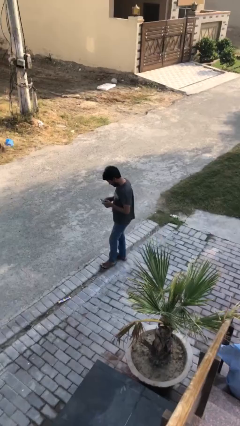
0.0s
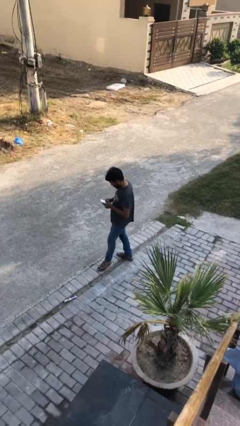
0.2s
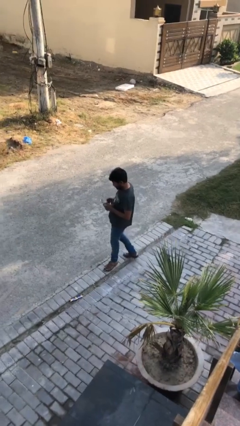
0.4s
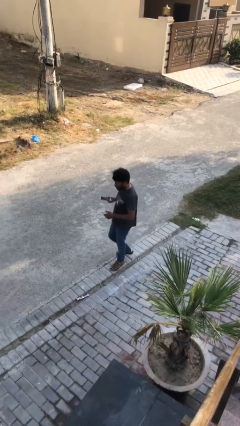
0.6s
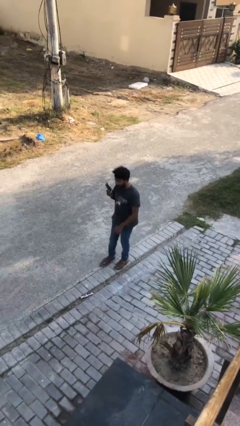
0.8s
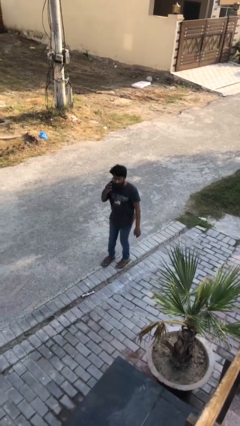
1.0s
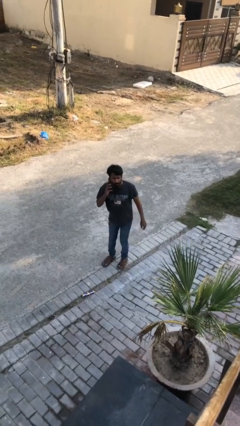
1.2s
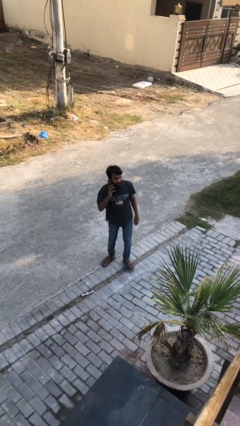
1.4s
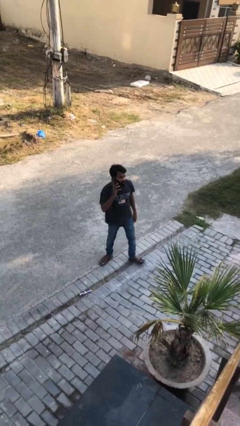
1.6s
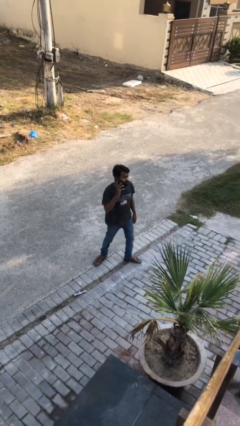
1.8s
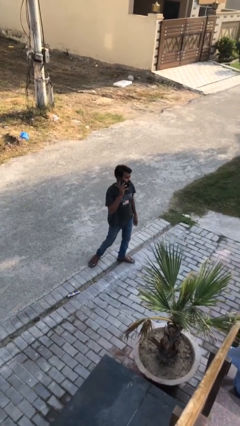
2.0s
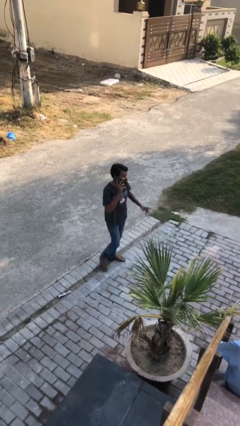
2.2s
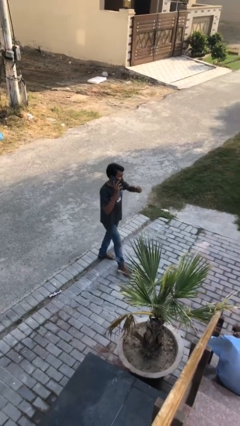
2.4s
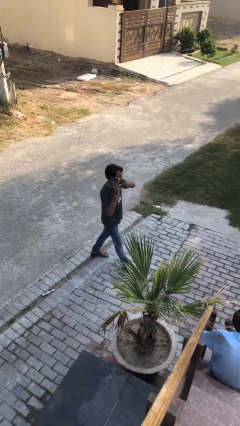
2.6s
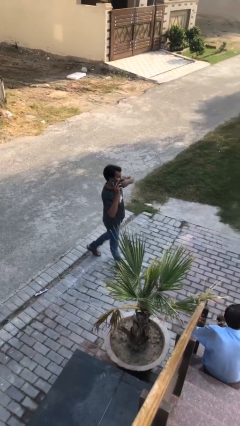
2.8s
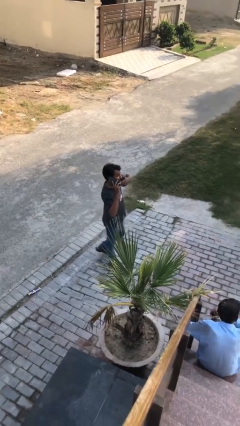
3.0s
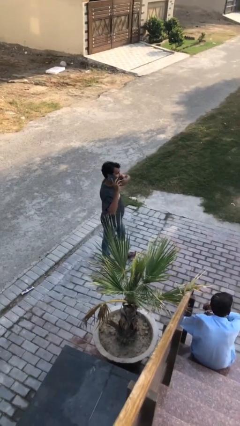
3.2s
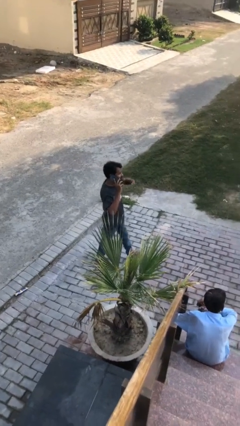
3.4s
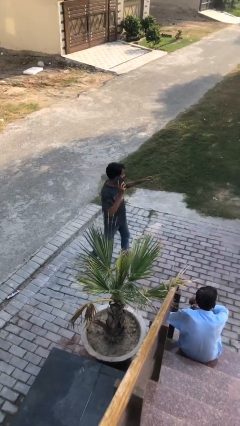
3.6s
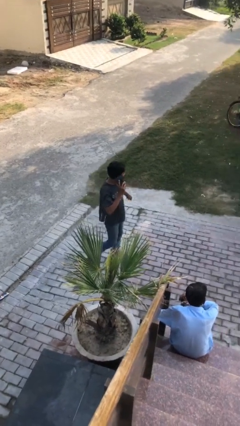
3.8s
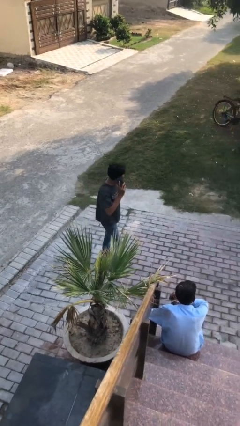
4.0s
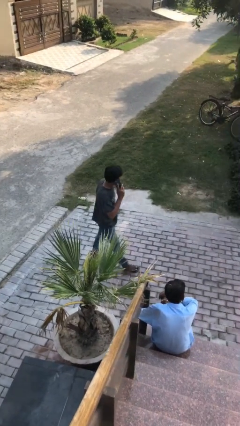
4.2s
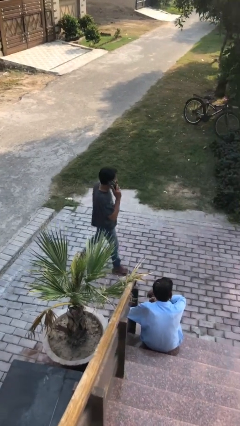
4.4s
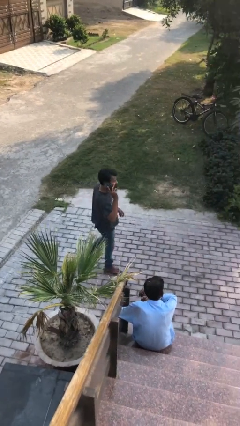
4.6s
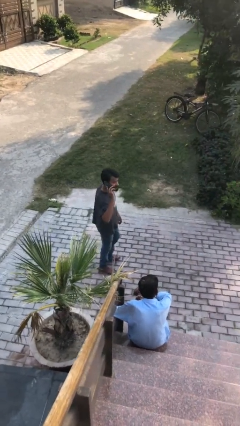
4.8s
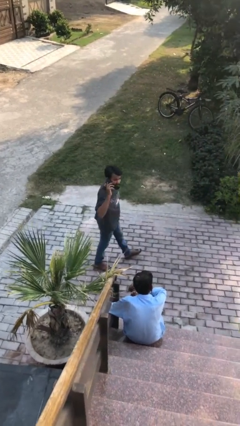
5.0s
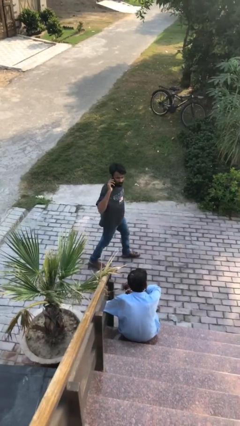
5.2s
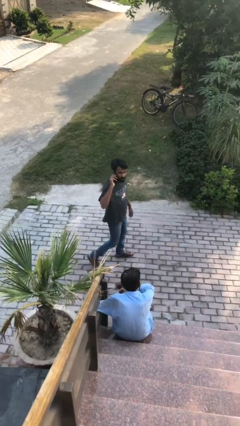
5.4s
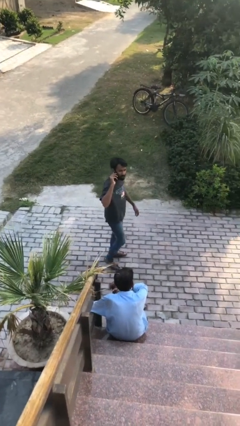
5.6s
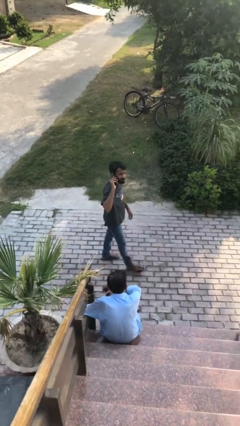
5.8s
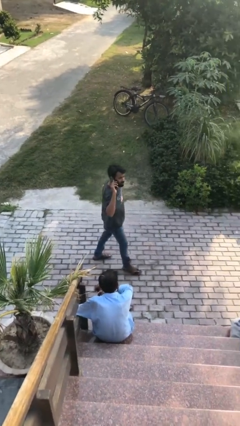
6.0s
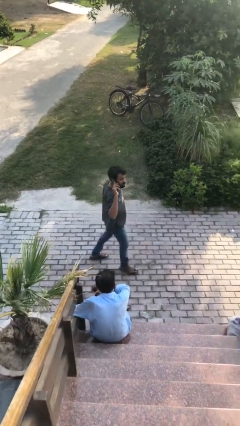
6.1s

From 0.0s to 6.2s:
person talks on phone

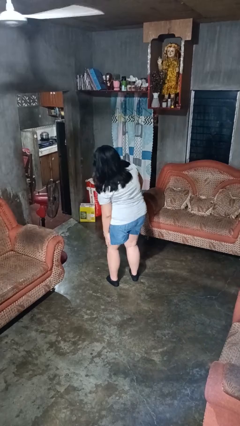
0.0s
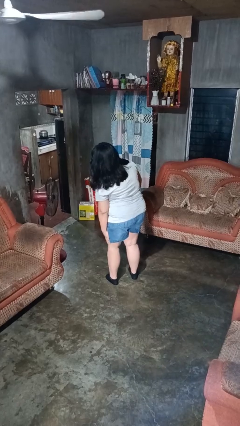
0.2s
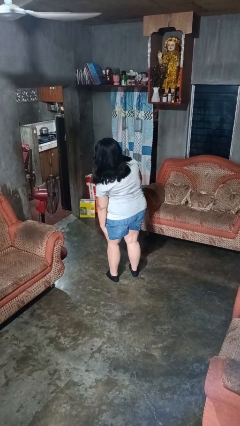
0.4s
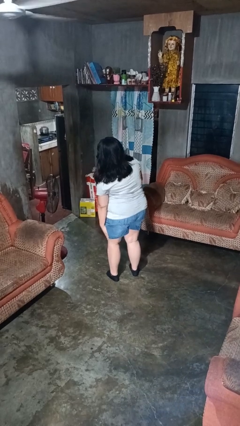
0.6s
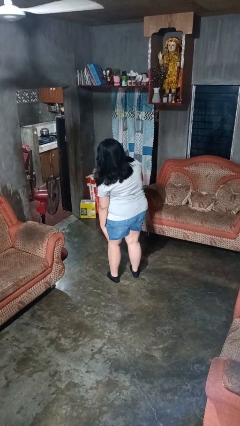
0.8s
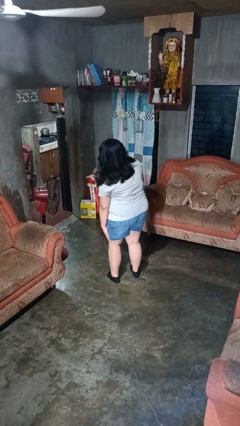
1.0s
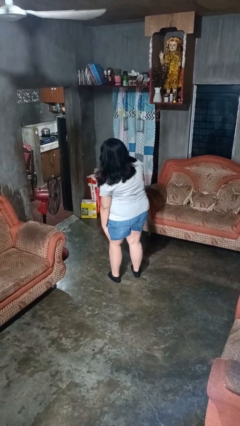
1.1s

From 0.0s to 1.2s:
person swats bug

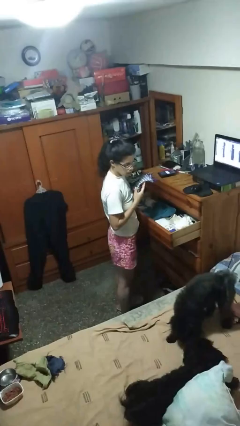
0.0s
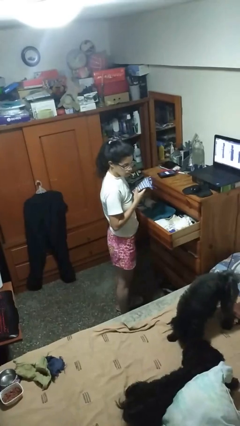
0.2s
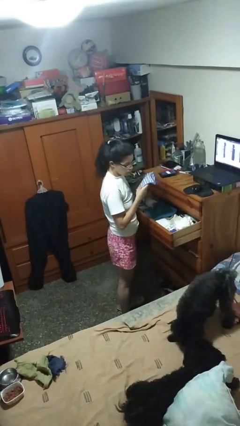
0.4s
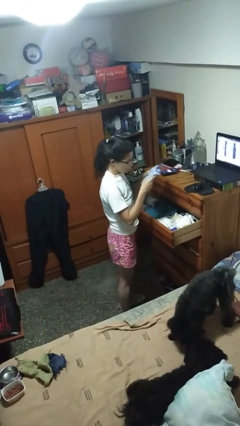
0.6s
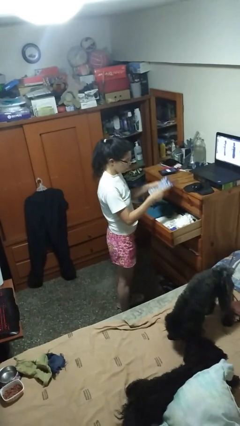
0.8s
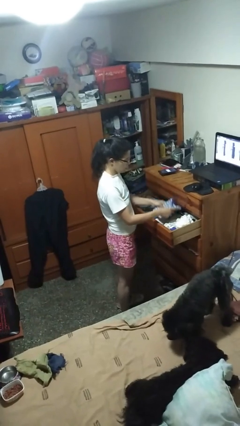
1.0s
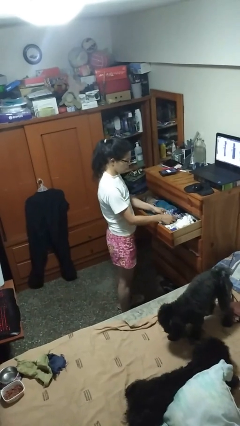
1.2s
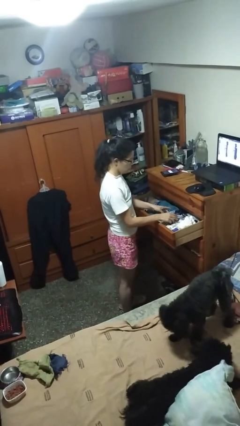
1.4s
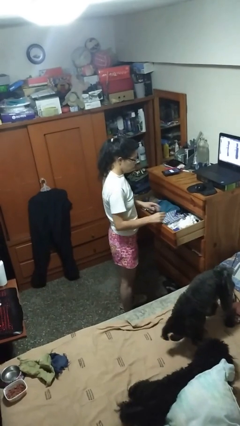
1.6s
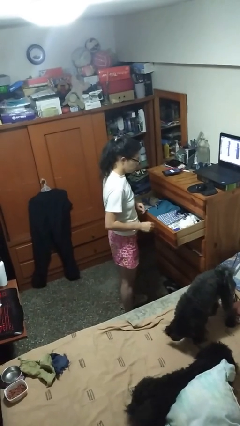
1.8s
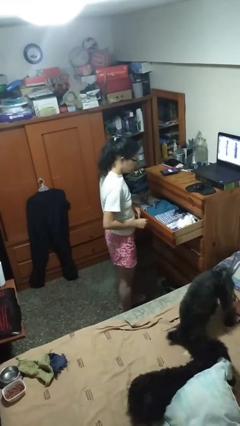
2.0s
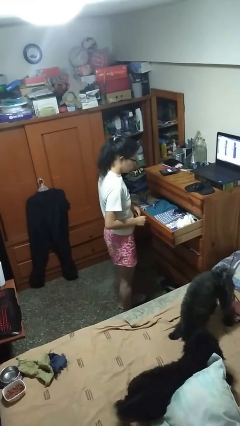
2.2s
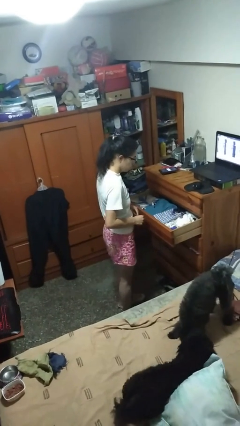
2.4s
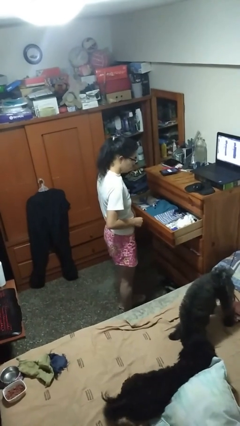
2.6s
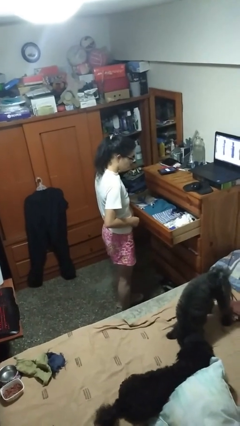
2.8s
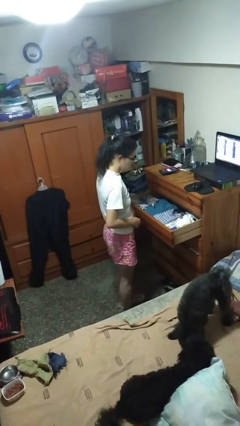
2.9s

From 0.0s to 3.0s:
person puts clothes into dresser

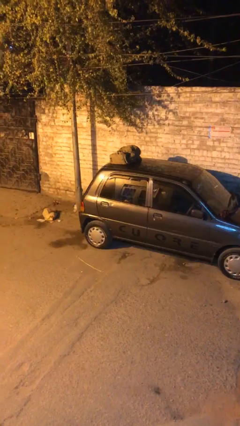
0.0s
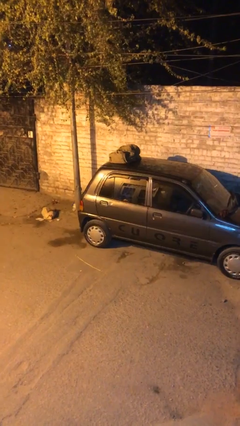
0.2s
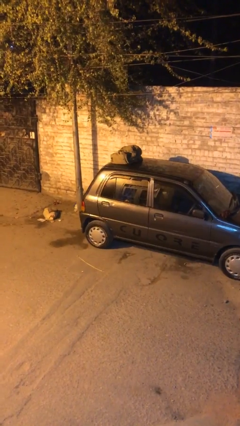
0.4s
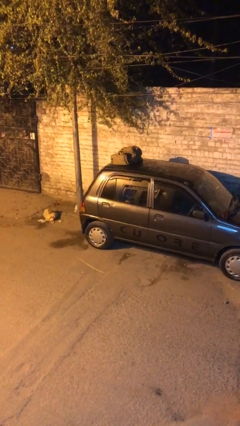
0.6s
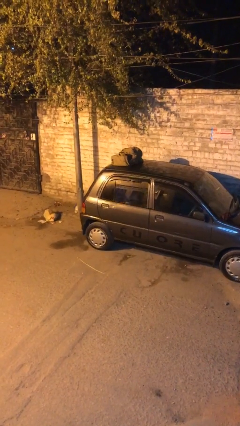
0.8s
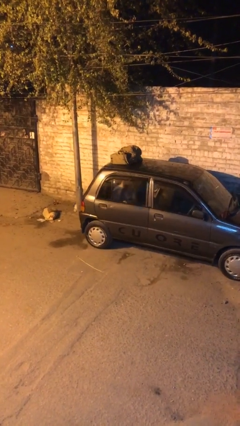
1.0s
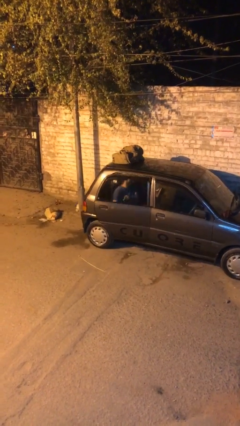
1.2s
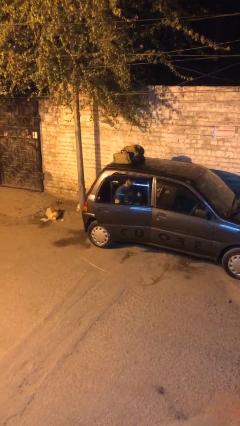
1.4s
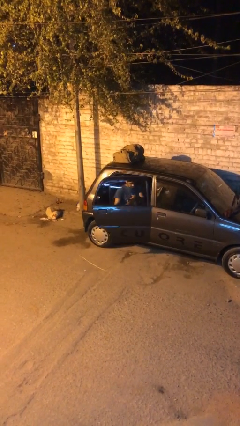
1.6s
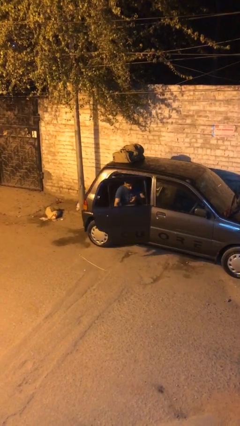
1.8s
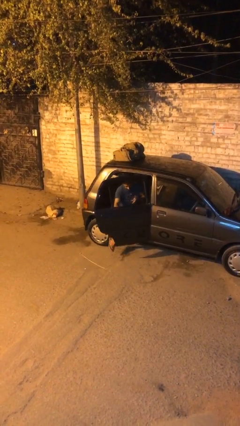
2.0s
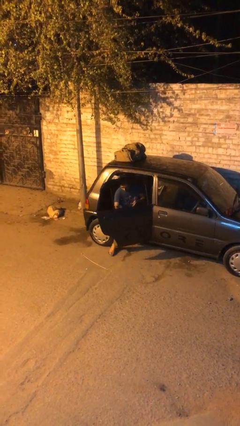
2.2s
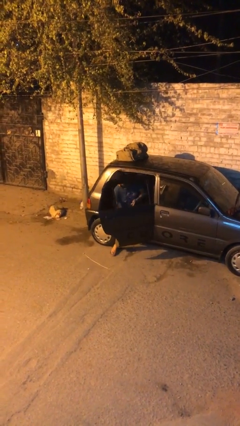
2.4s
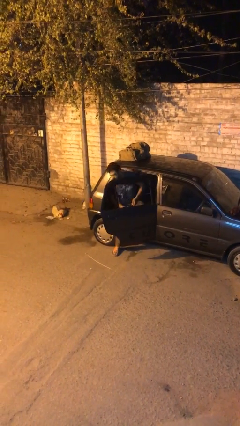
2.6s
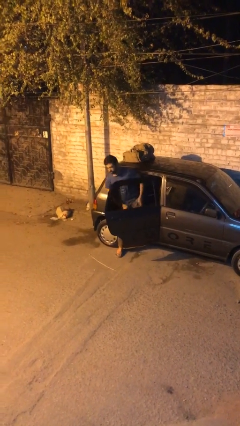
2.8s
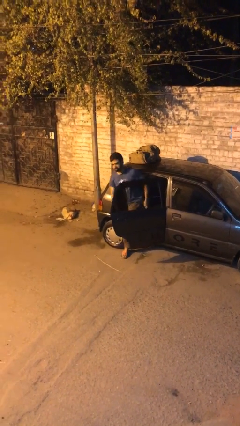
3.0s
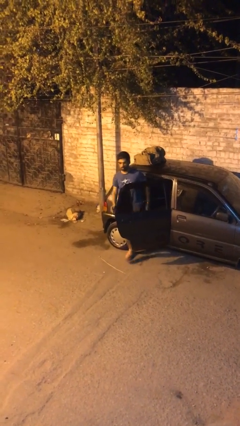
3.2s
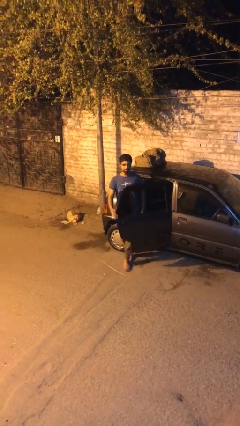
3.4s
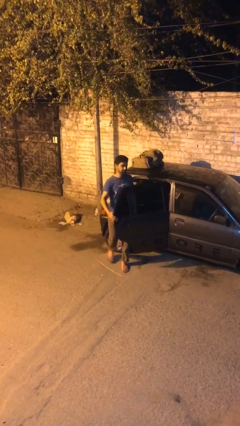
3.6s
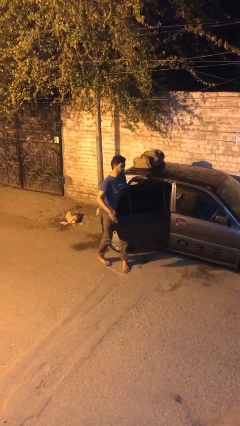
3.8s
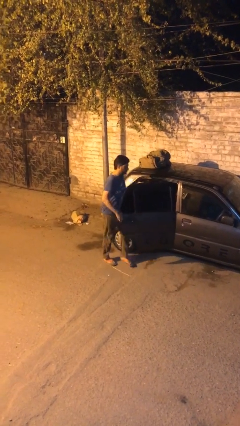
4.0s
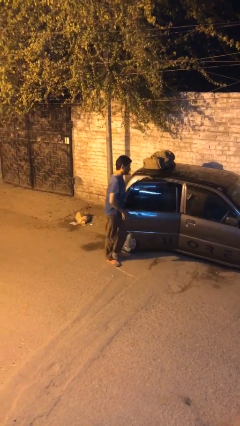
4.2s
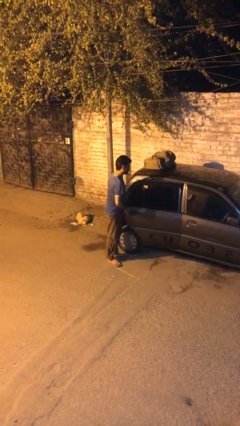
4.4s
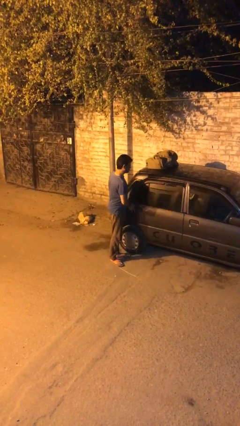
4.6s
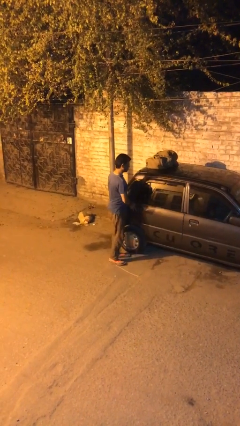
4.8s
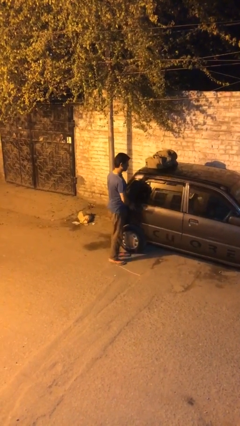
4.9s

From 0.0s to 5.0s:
car drops off person

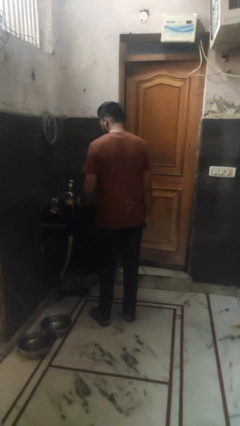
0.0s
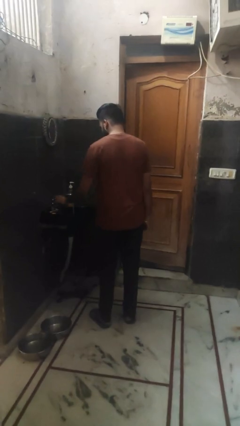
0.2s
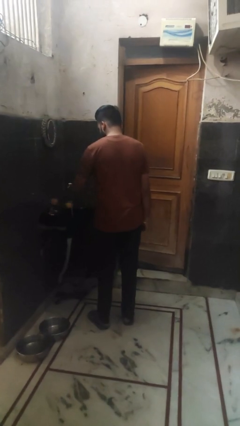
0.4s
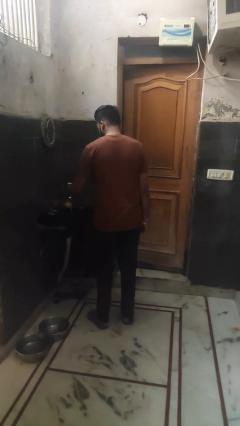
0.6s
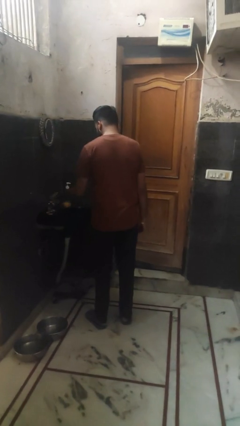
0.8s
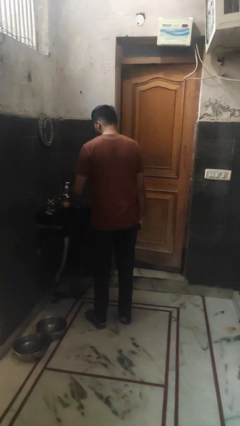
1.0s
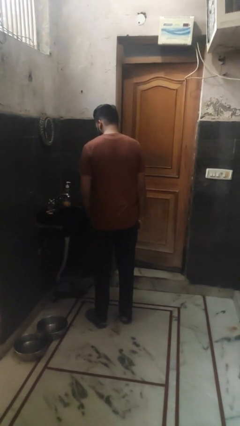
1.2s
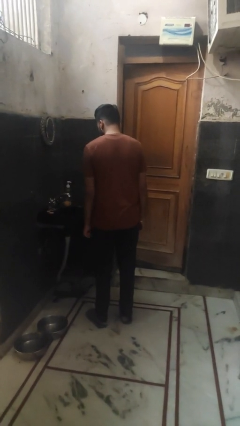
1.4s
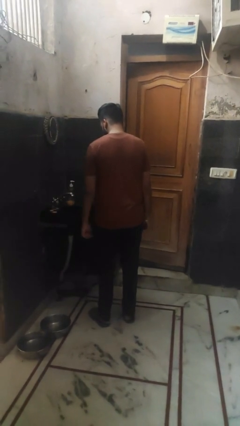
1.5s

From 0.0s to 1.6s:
person turns off faucet

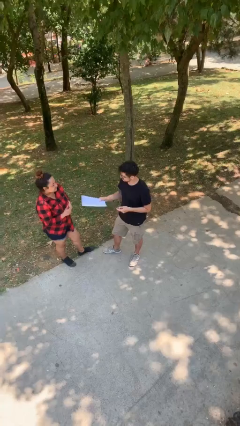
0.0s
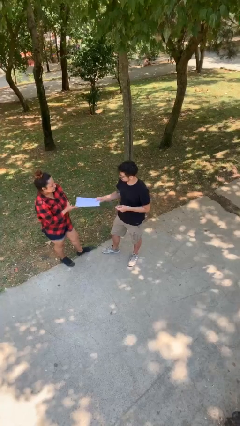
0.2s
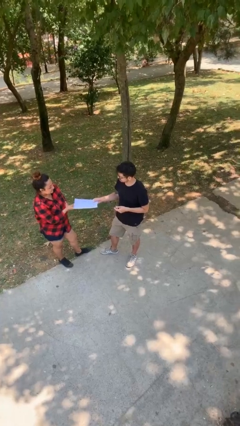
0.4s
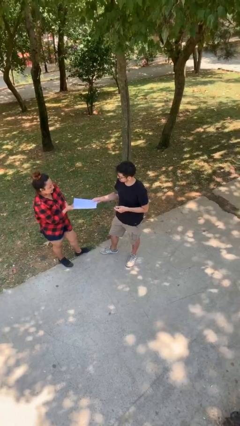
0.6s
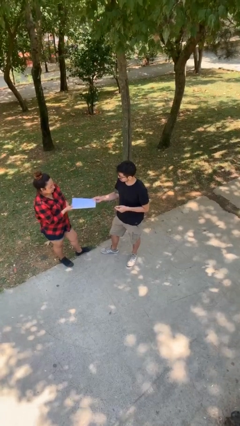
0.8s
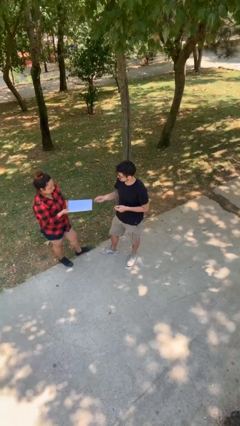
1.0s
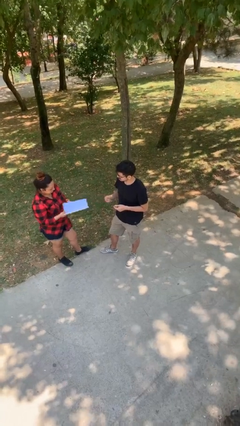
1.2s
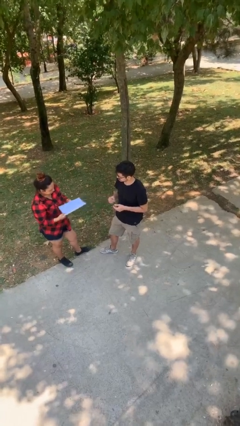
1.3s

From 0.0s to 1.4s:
person transfers object to person
